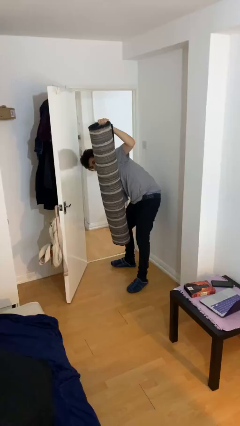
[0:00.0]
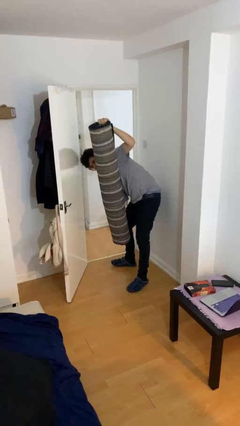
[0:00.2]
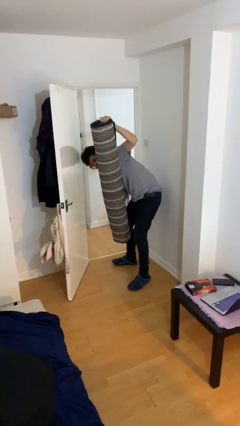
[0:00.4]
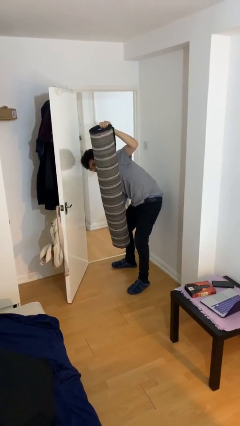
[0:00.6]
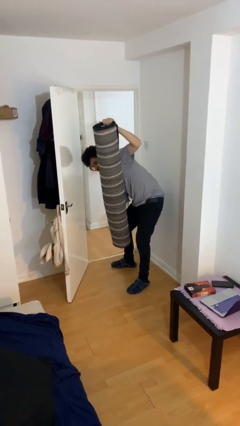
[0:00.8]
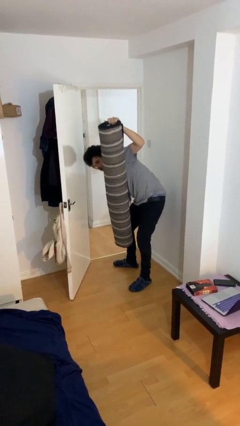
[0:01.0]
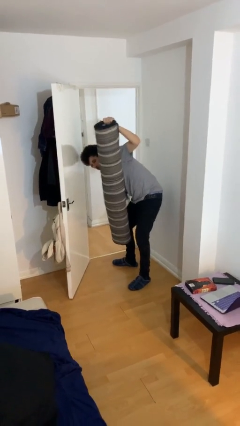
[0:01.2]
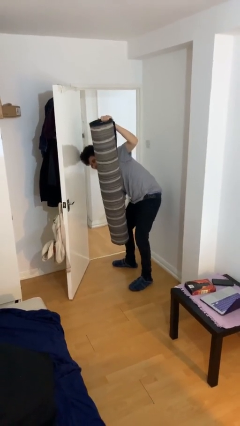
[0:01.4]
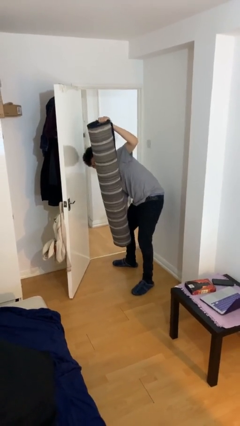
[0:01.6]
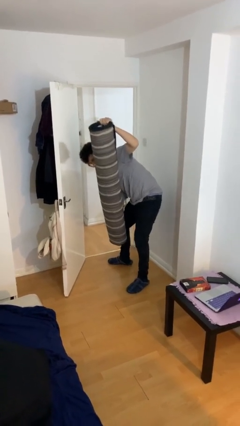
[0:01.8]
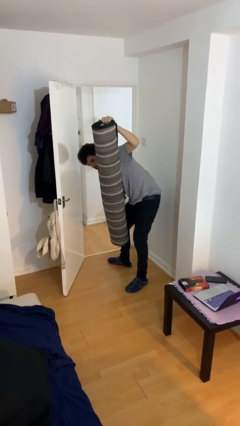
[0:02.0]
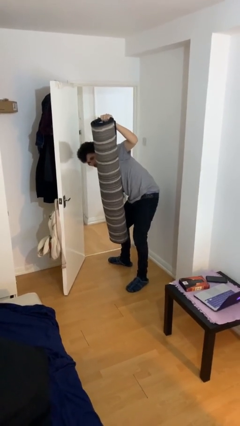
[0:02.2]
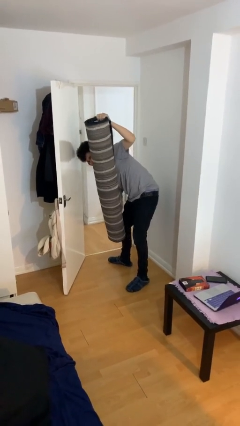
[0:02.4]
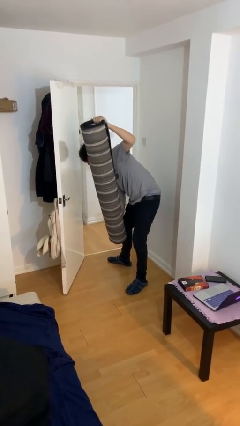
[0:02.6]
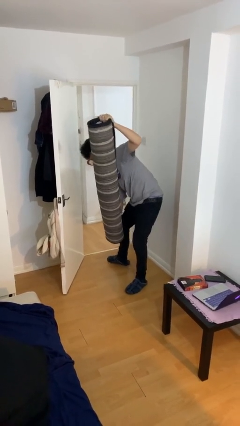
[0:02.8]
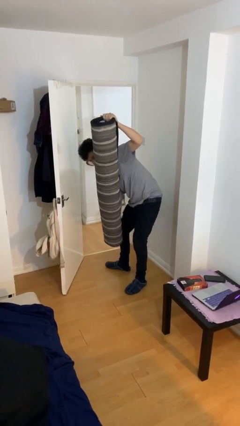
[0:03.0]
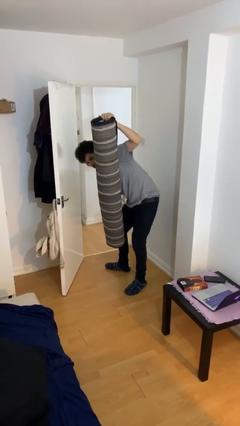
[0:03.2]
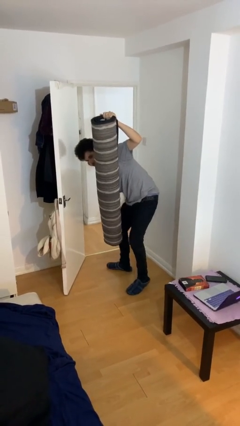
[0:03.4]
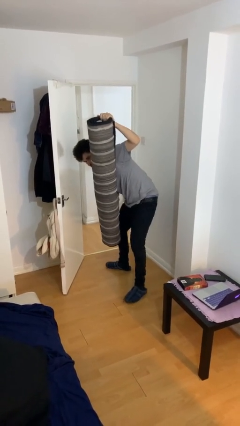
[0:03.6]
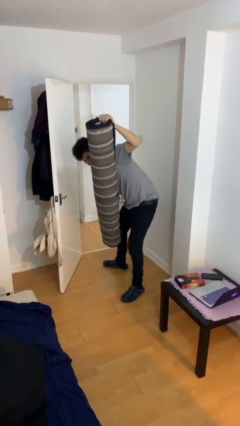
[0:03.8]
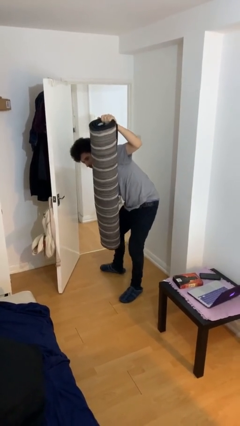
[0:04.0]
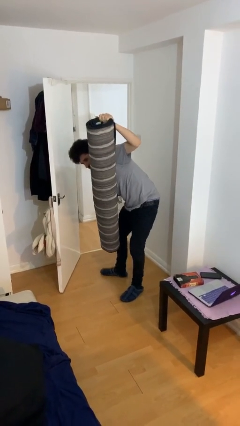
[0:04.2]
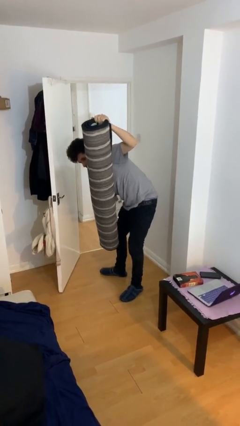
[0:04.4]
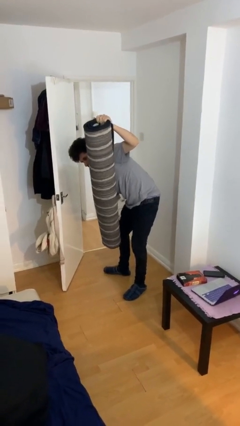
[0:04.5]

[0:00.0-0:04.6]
person carries heavy object

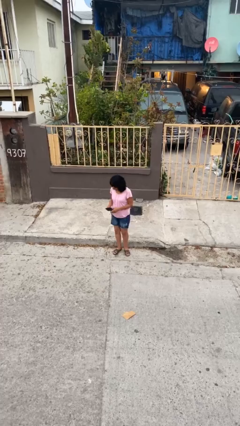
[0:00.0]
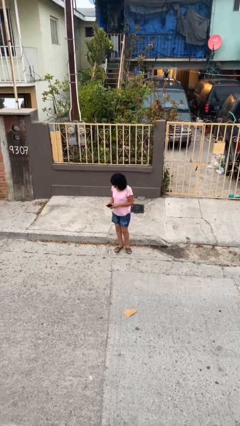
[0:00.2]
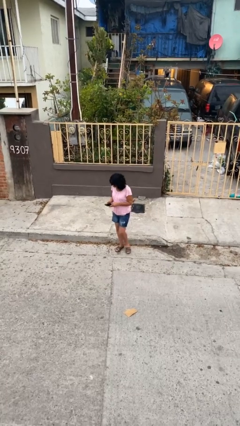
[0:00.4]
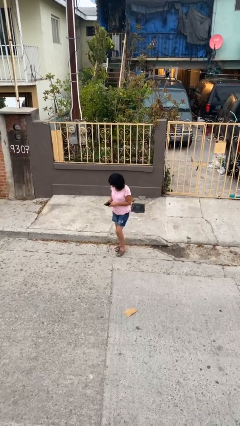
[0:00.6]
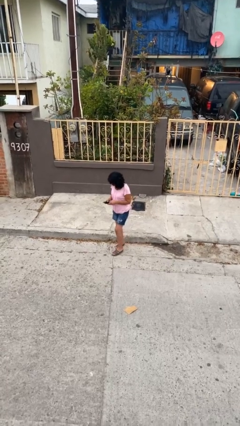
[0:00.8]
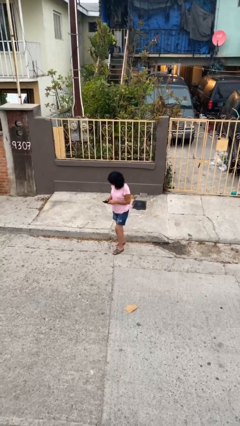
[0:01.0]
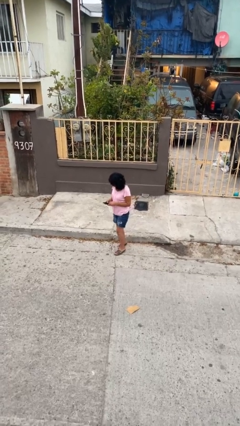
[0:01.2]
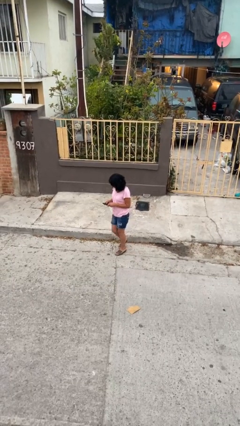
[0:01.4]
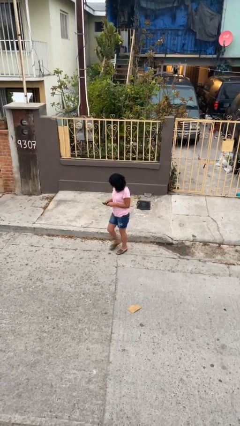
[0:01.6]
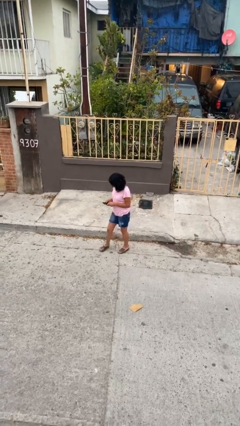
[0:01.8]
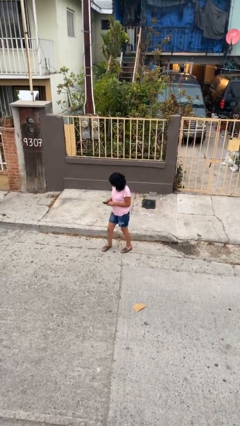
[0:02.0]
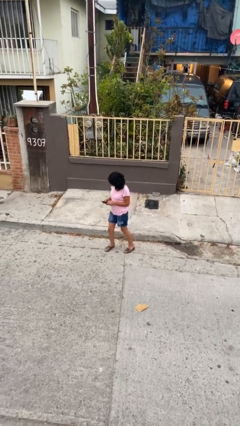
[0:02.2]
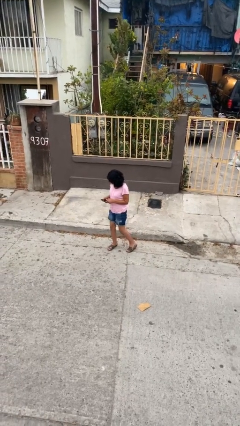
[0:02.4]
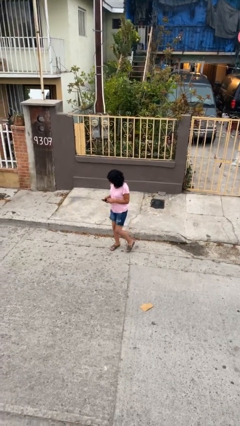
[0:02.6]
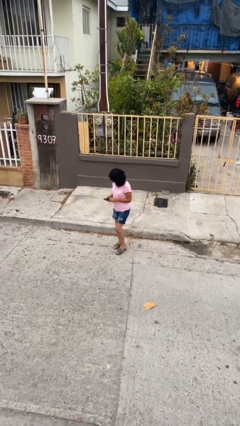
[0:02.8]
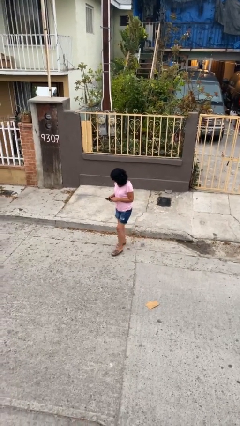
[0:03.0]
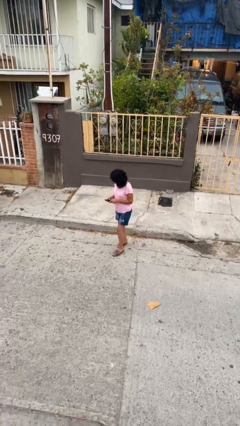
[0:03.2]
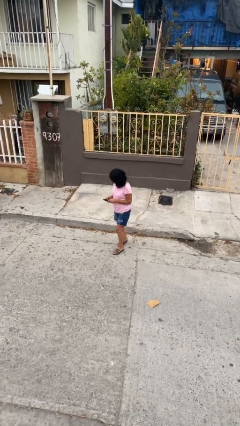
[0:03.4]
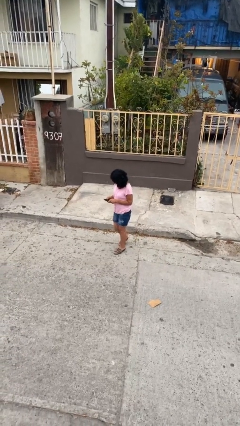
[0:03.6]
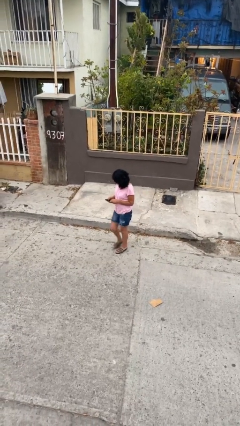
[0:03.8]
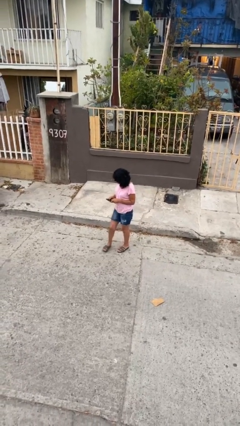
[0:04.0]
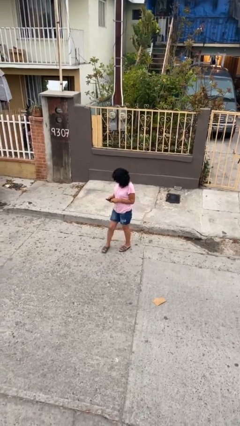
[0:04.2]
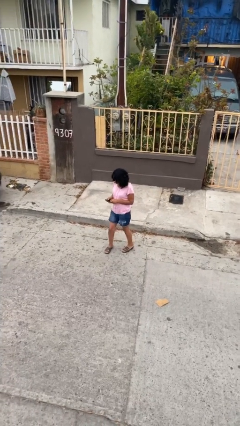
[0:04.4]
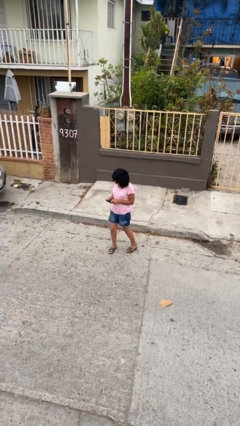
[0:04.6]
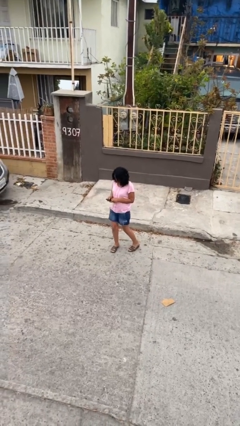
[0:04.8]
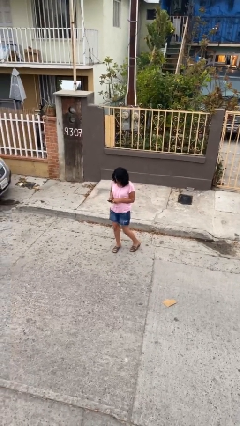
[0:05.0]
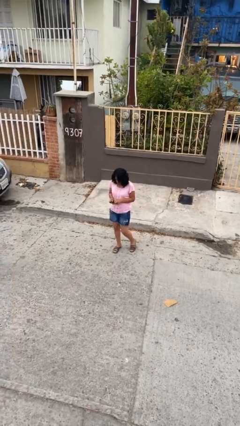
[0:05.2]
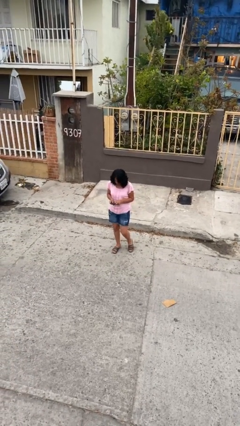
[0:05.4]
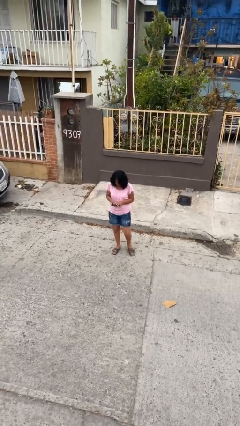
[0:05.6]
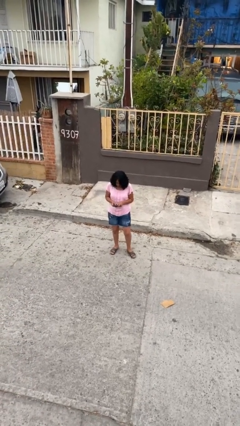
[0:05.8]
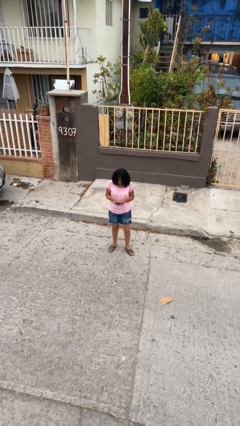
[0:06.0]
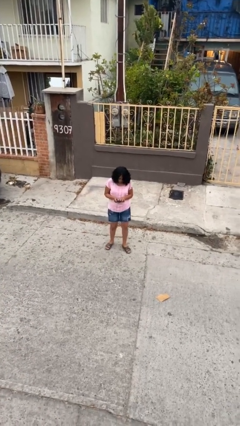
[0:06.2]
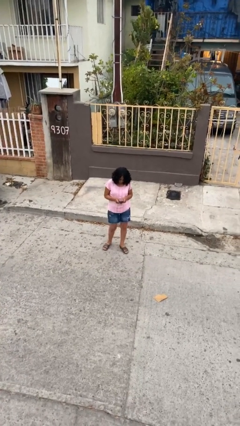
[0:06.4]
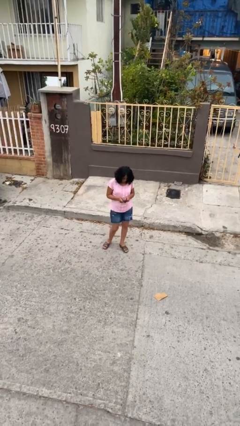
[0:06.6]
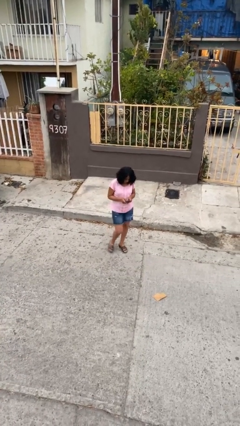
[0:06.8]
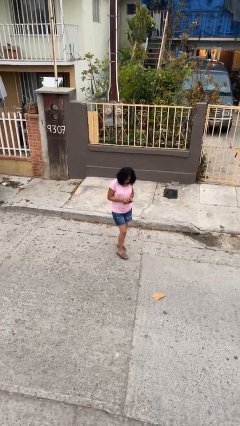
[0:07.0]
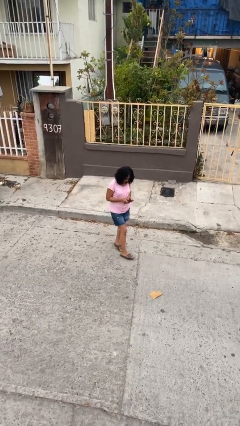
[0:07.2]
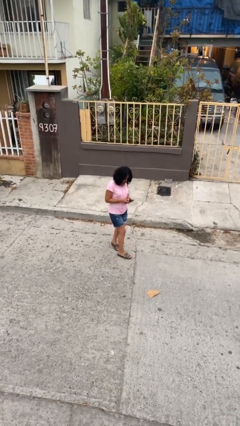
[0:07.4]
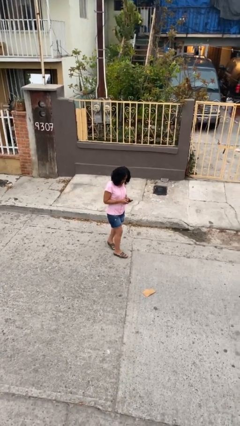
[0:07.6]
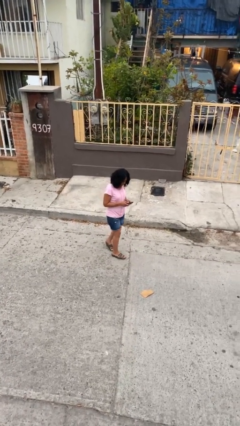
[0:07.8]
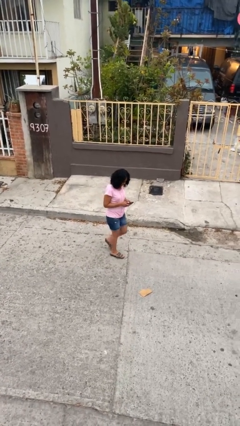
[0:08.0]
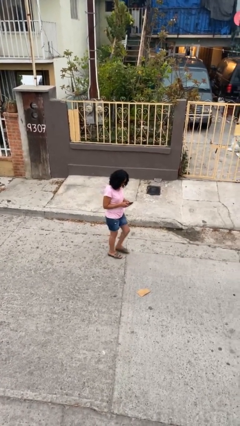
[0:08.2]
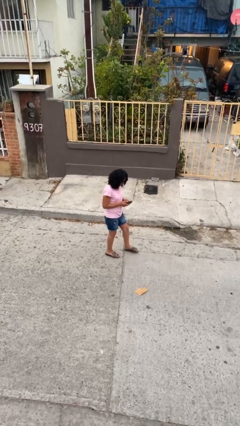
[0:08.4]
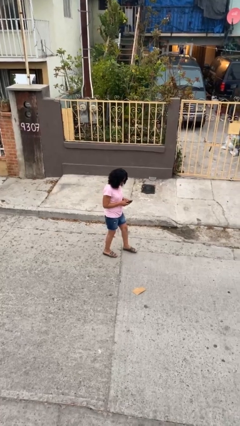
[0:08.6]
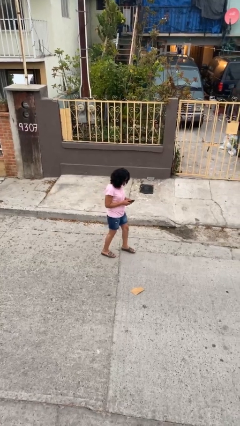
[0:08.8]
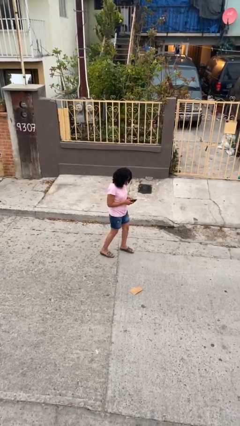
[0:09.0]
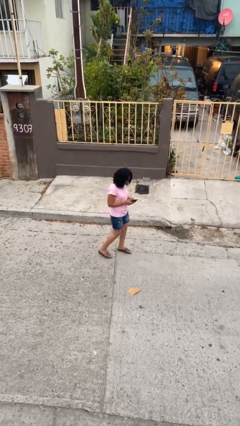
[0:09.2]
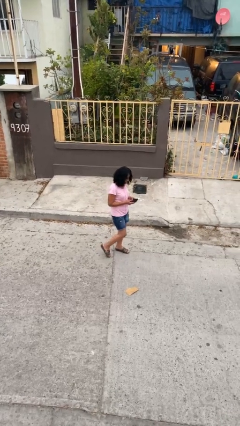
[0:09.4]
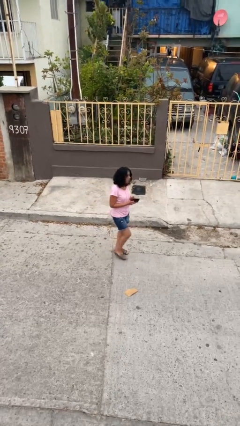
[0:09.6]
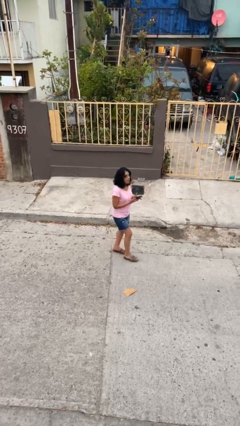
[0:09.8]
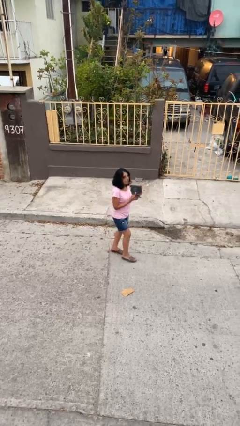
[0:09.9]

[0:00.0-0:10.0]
person texts on phone

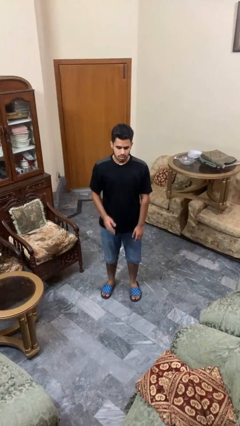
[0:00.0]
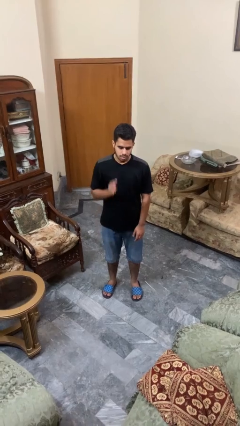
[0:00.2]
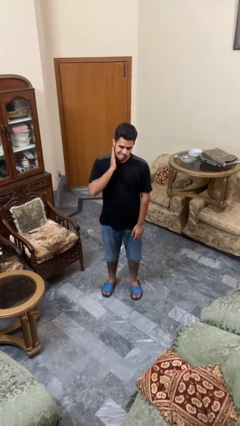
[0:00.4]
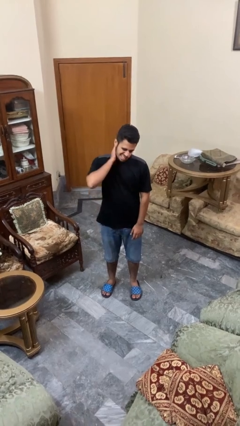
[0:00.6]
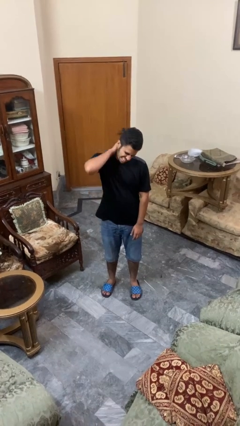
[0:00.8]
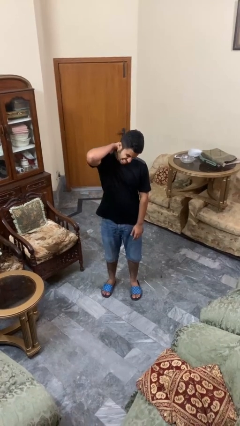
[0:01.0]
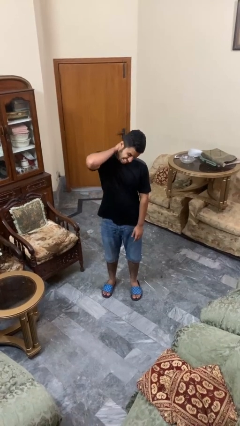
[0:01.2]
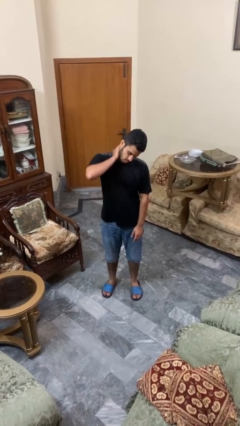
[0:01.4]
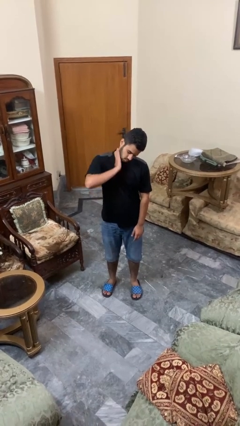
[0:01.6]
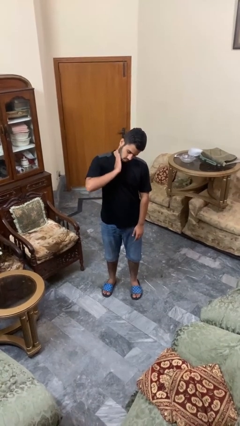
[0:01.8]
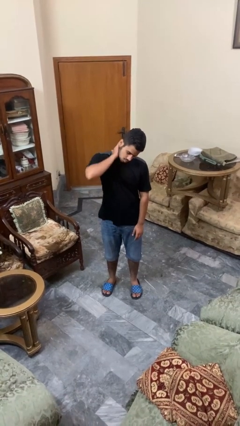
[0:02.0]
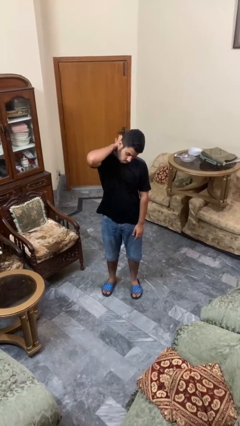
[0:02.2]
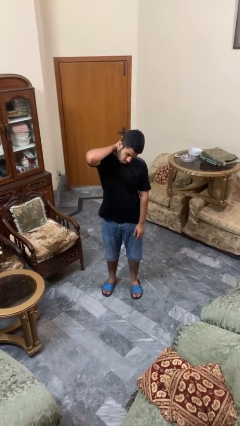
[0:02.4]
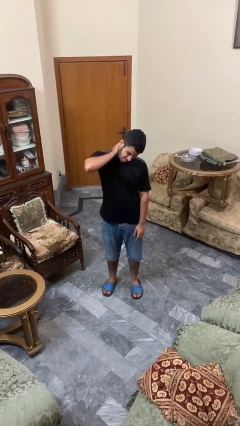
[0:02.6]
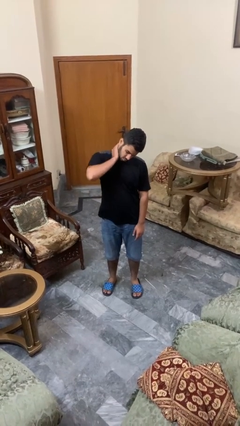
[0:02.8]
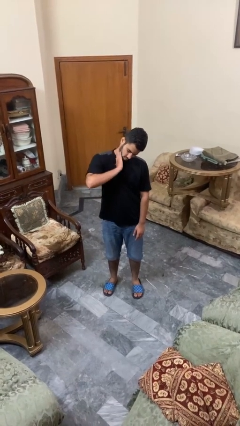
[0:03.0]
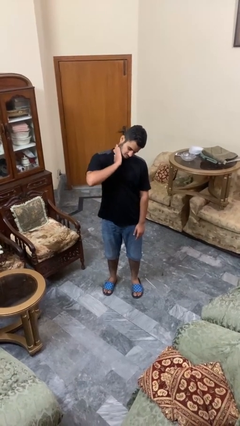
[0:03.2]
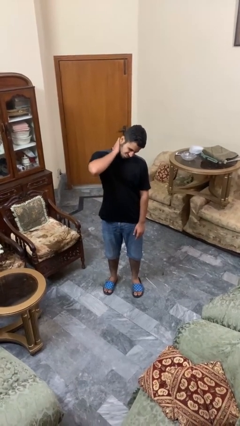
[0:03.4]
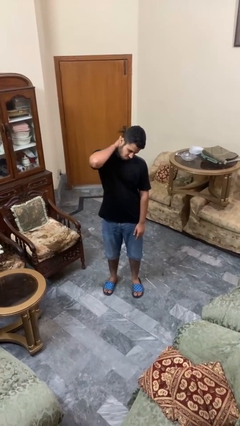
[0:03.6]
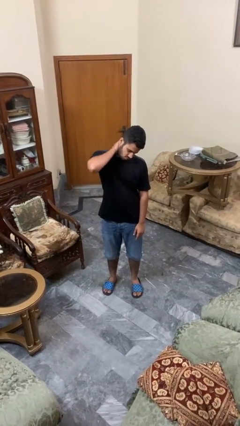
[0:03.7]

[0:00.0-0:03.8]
person rubs neck
